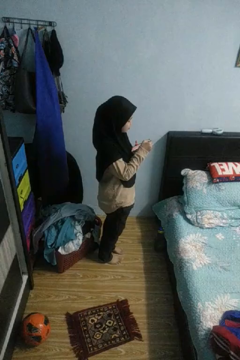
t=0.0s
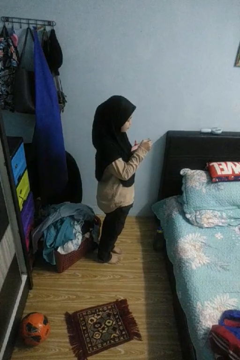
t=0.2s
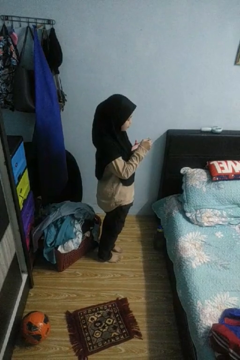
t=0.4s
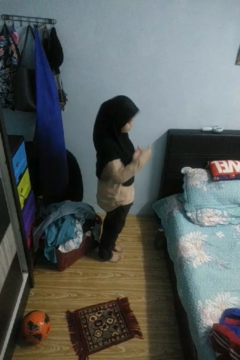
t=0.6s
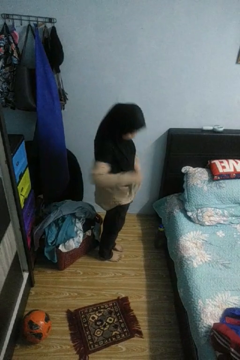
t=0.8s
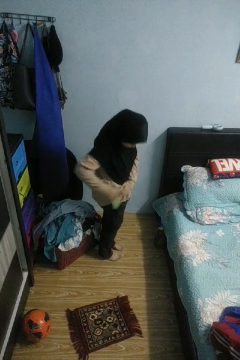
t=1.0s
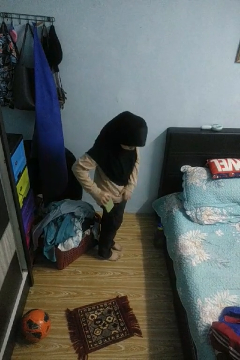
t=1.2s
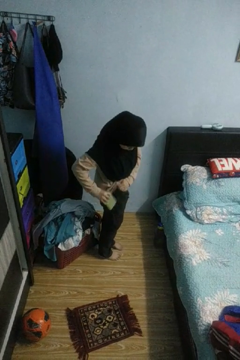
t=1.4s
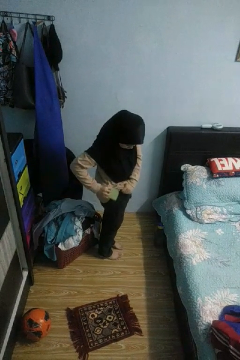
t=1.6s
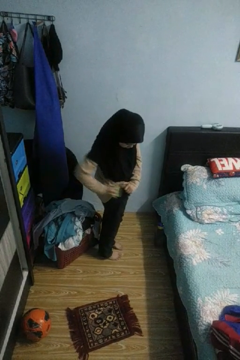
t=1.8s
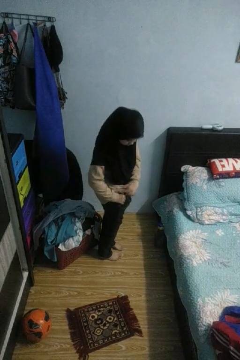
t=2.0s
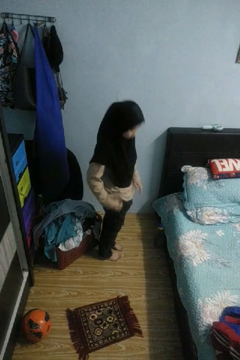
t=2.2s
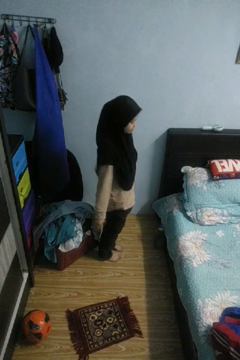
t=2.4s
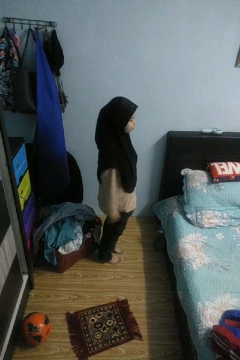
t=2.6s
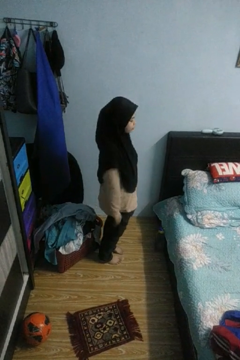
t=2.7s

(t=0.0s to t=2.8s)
person puts phone into pocket

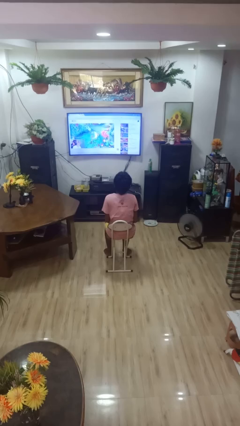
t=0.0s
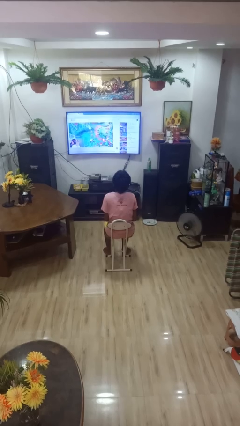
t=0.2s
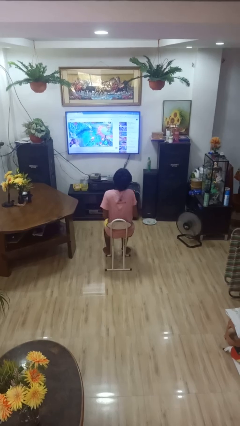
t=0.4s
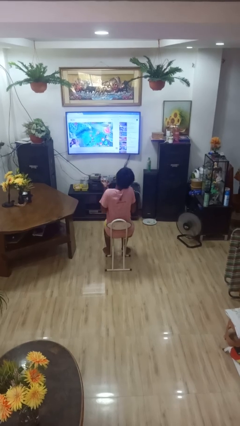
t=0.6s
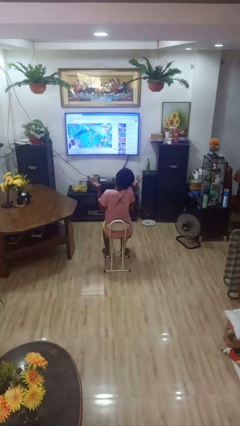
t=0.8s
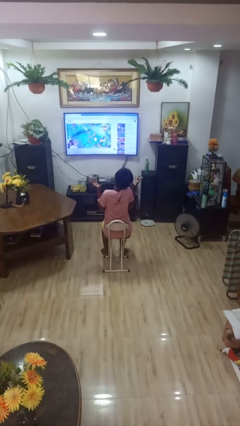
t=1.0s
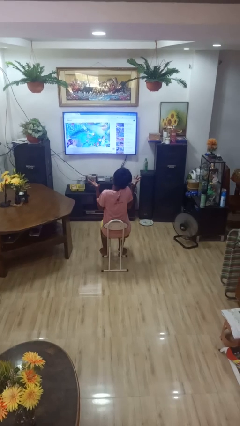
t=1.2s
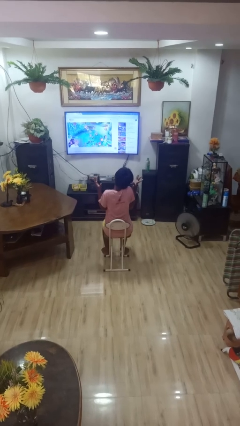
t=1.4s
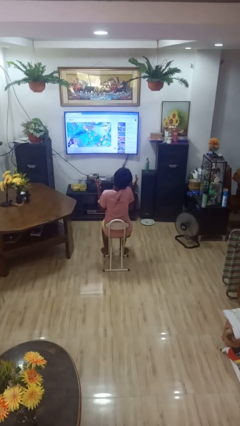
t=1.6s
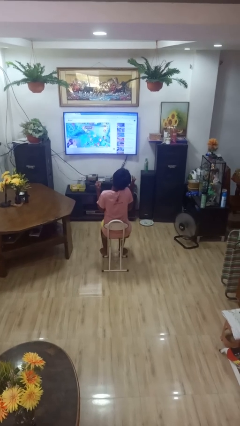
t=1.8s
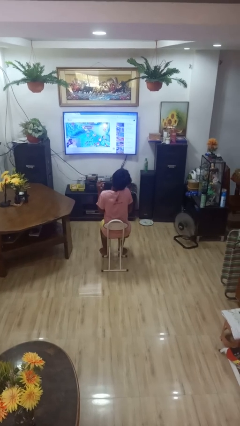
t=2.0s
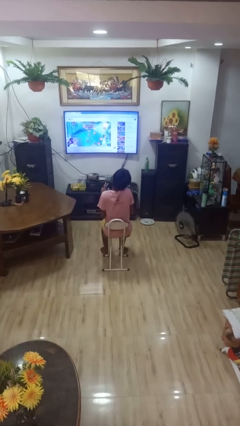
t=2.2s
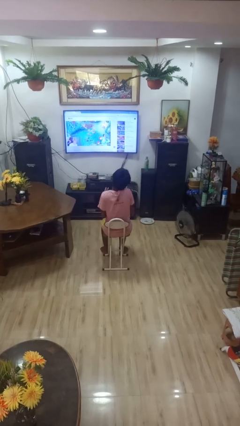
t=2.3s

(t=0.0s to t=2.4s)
person shrugs

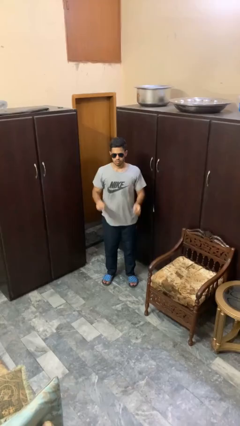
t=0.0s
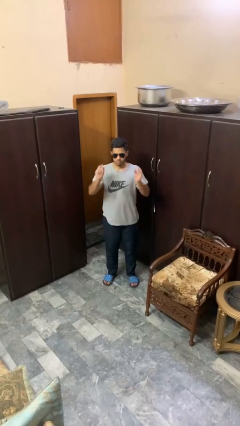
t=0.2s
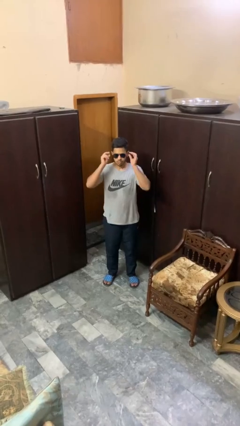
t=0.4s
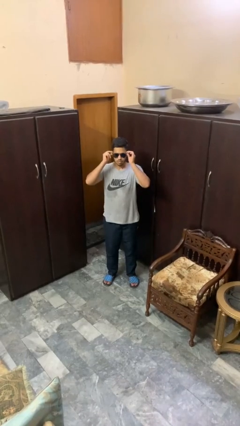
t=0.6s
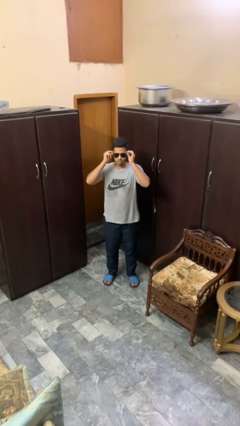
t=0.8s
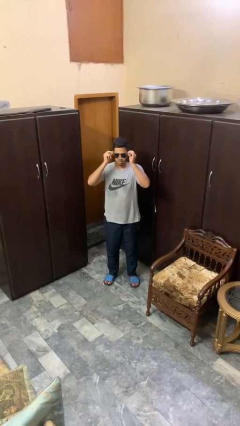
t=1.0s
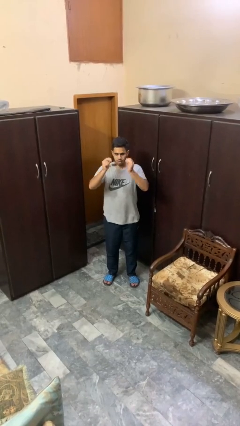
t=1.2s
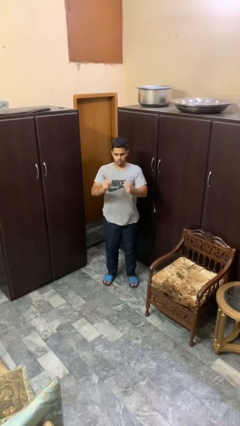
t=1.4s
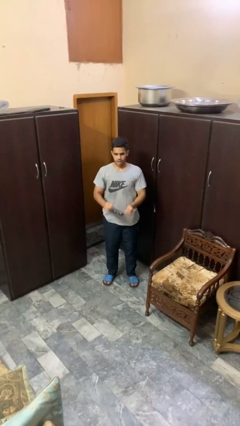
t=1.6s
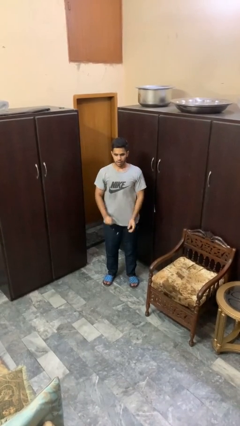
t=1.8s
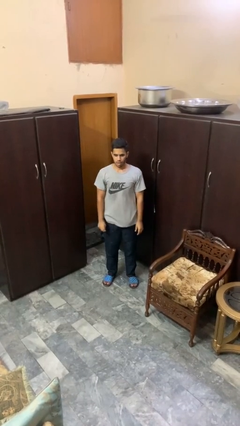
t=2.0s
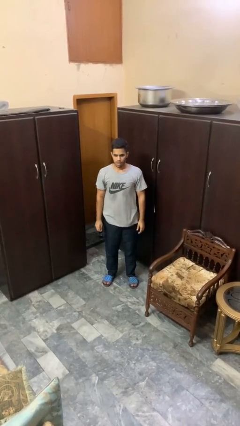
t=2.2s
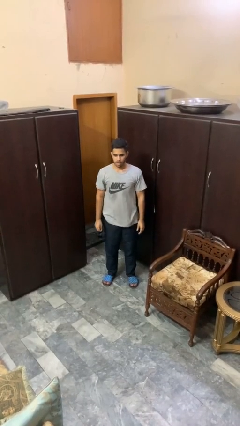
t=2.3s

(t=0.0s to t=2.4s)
person takes off sunglasses

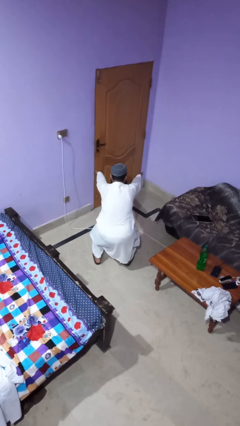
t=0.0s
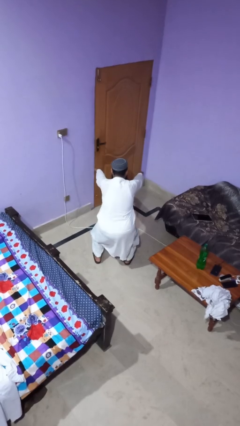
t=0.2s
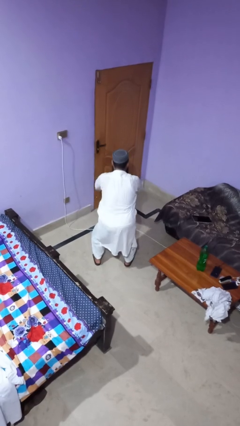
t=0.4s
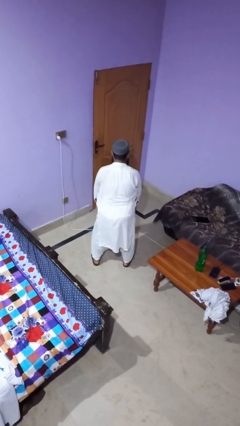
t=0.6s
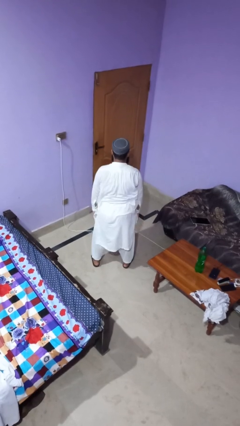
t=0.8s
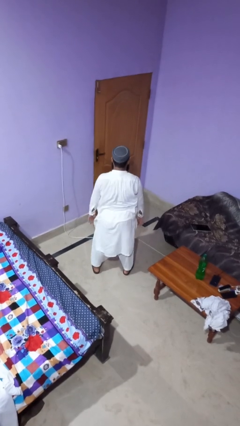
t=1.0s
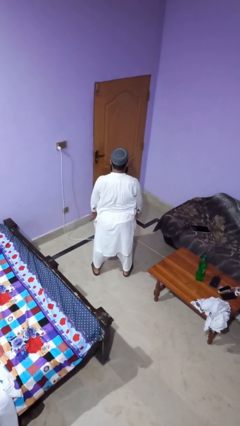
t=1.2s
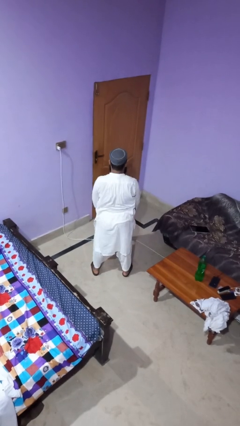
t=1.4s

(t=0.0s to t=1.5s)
person stands up

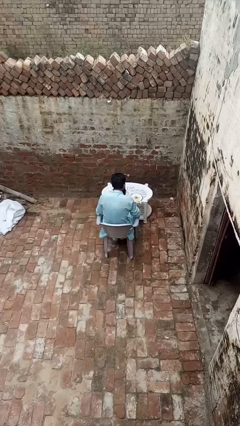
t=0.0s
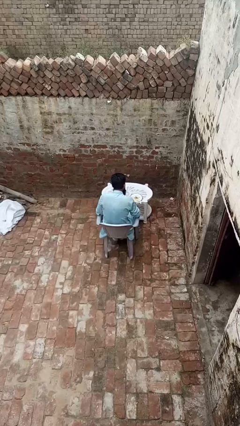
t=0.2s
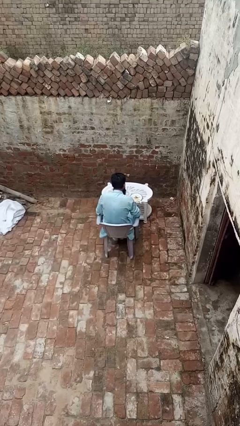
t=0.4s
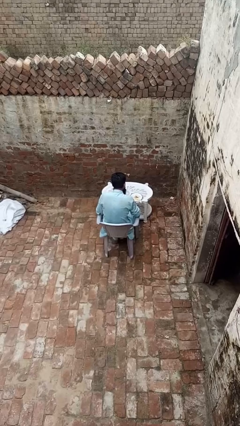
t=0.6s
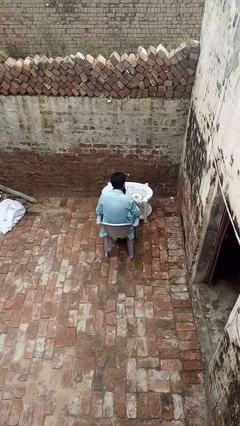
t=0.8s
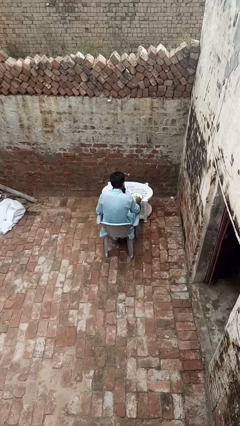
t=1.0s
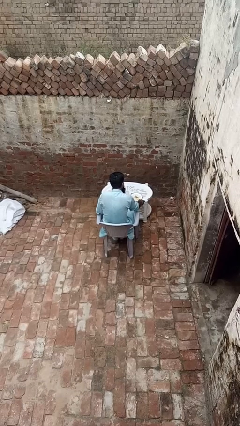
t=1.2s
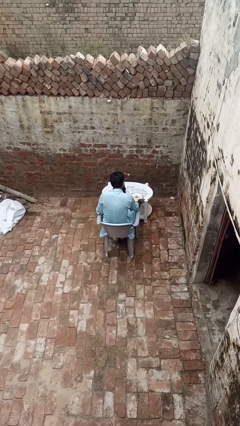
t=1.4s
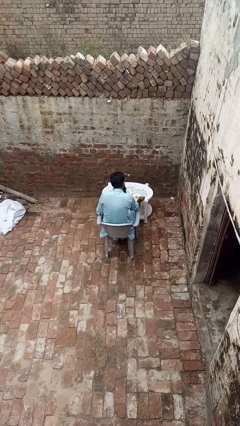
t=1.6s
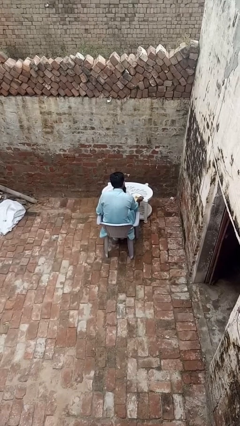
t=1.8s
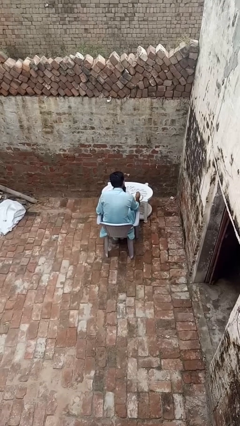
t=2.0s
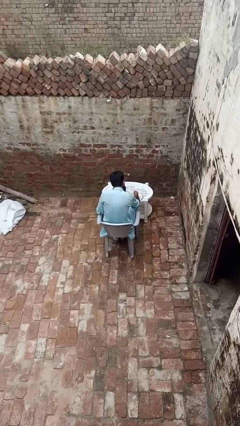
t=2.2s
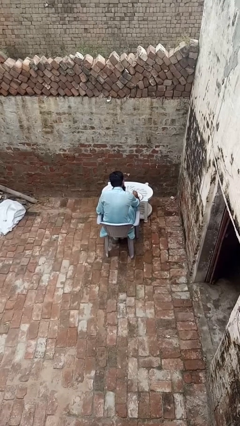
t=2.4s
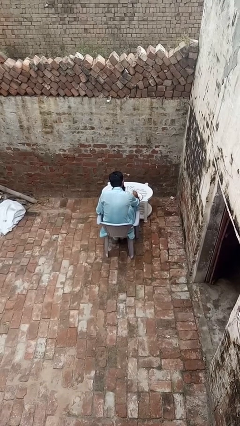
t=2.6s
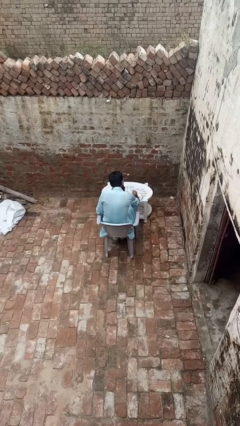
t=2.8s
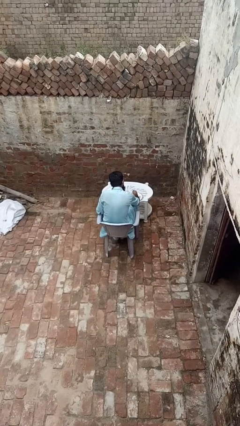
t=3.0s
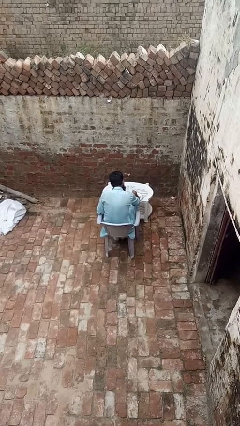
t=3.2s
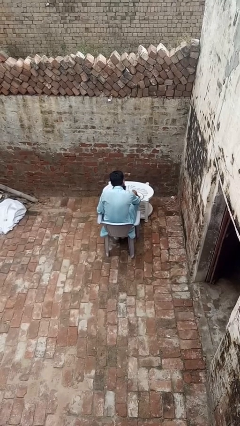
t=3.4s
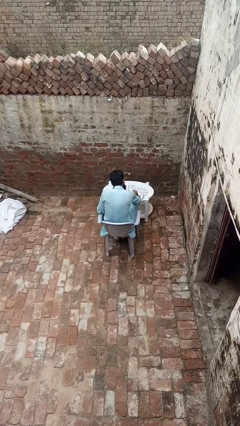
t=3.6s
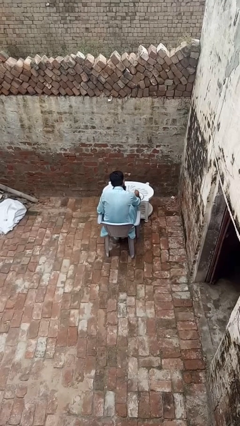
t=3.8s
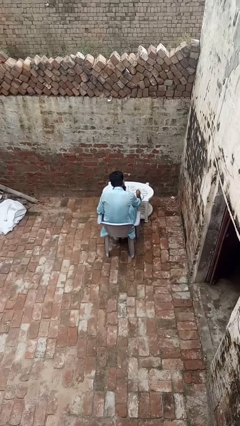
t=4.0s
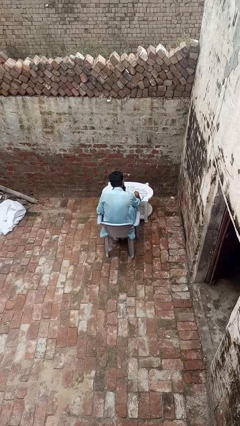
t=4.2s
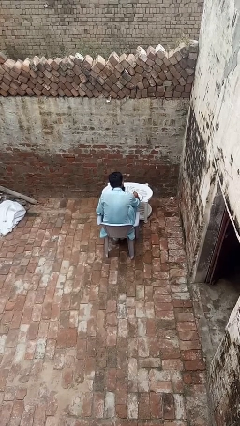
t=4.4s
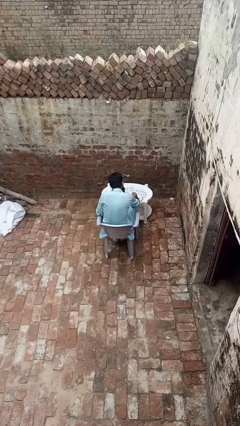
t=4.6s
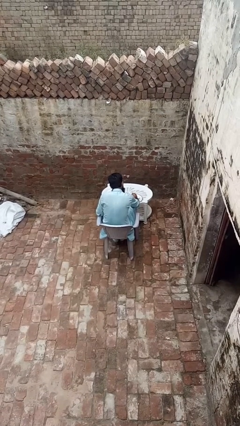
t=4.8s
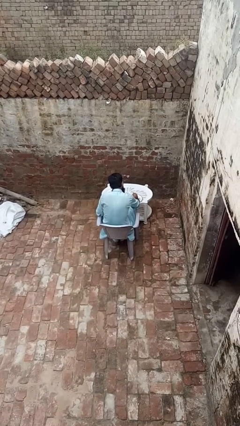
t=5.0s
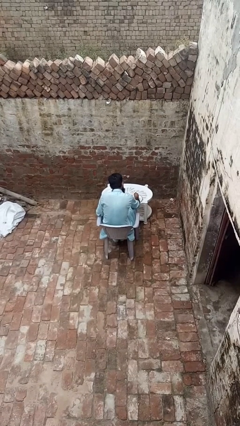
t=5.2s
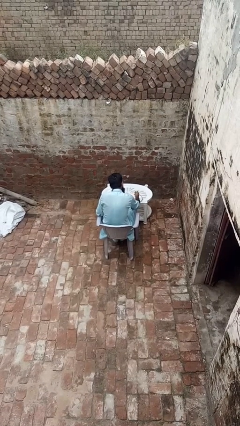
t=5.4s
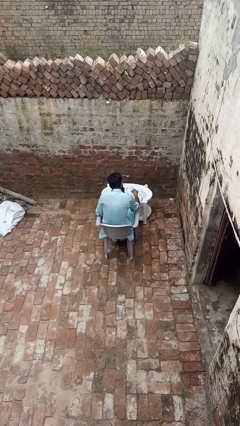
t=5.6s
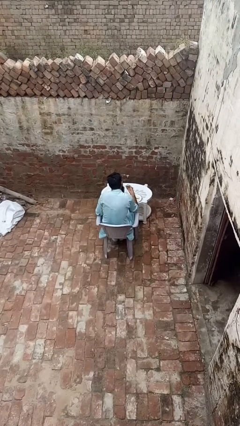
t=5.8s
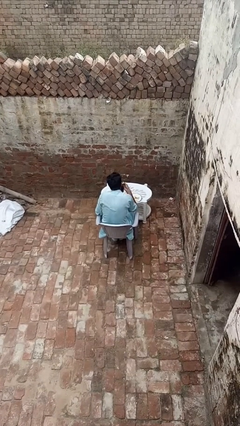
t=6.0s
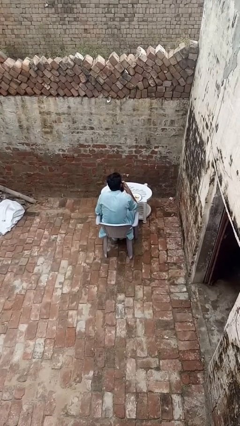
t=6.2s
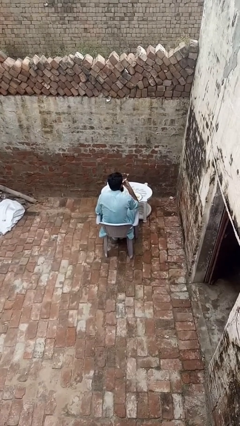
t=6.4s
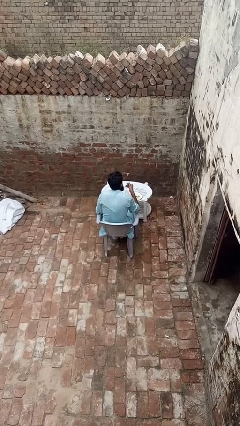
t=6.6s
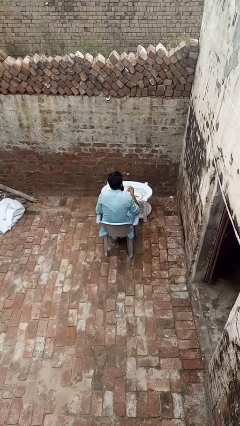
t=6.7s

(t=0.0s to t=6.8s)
person eats with utensil

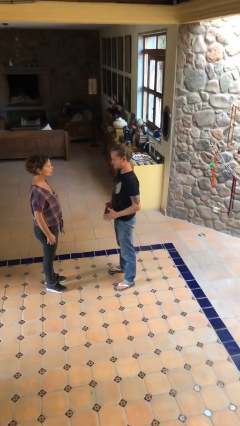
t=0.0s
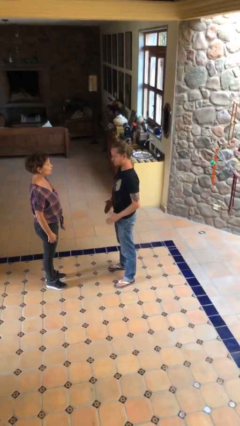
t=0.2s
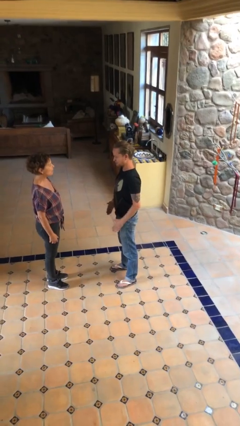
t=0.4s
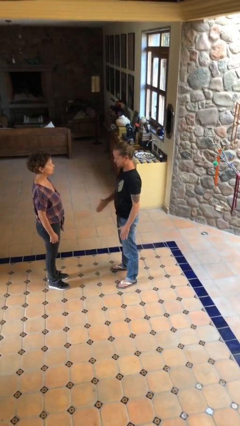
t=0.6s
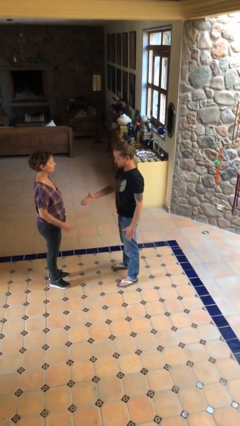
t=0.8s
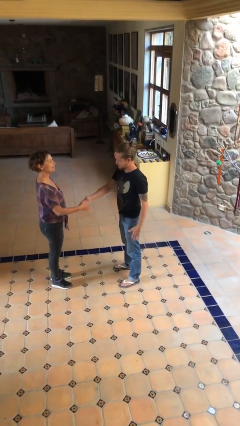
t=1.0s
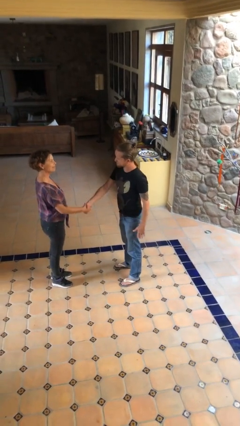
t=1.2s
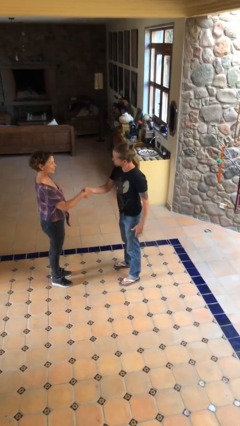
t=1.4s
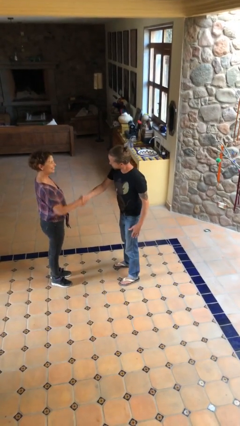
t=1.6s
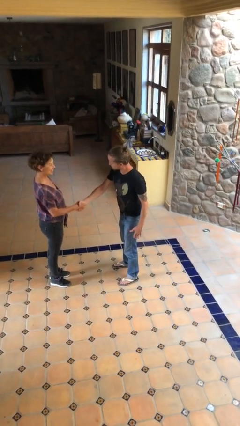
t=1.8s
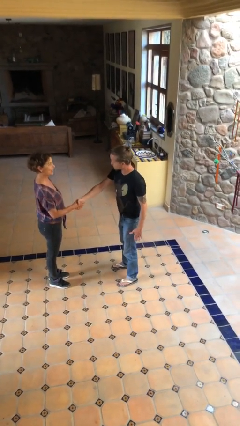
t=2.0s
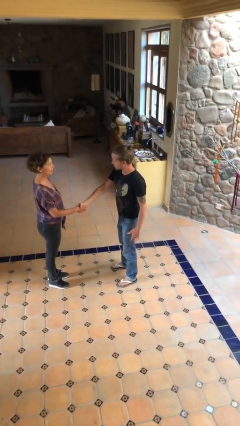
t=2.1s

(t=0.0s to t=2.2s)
person shakes hand
